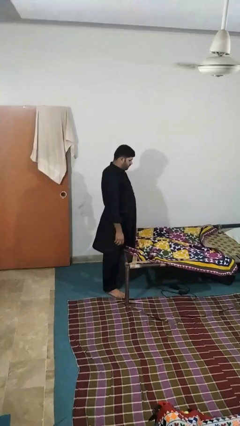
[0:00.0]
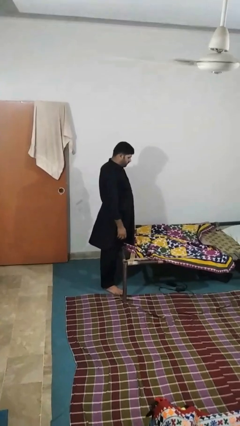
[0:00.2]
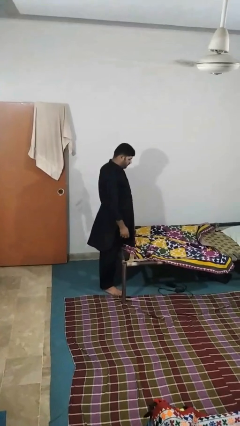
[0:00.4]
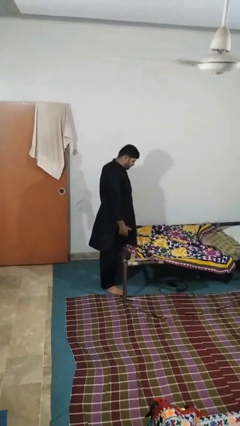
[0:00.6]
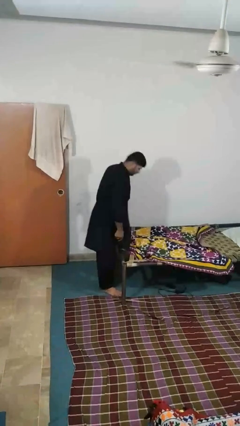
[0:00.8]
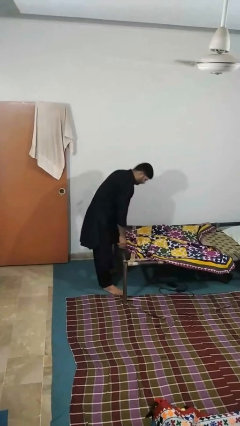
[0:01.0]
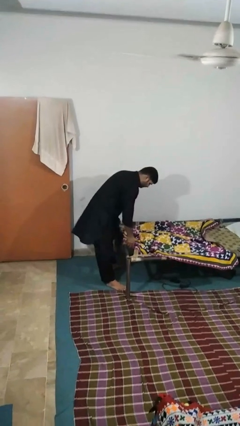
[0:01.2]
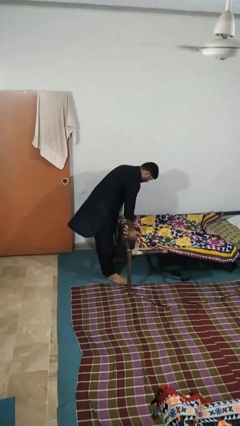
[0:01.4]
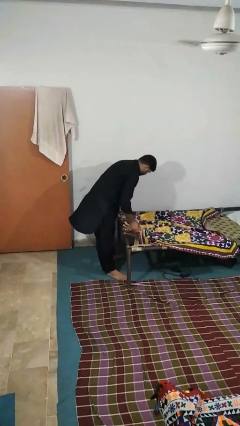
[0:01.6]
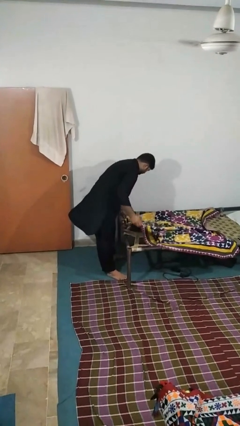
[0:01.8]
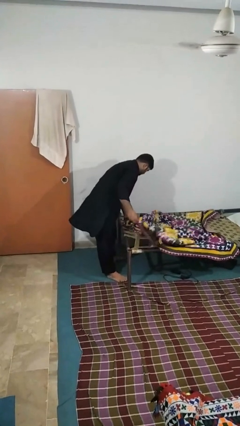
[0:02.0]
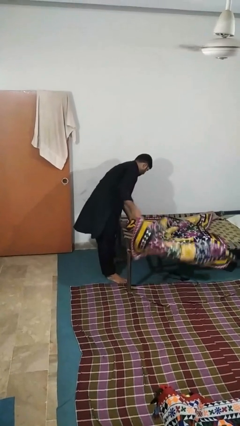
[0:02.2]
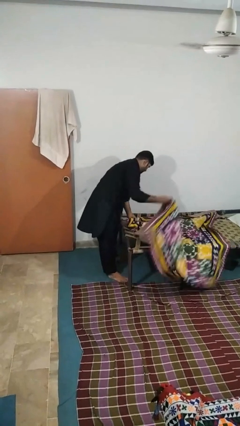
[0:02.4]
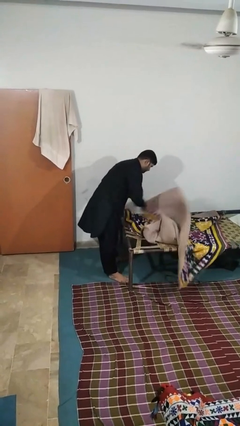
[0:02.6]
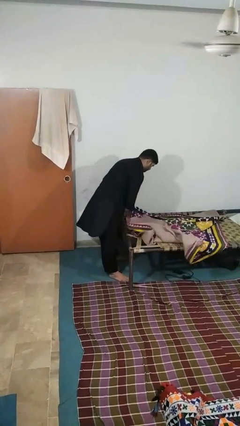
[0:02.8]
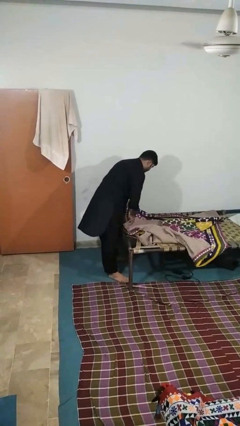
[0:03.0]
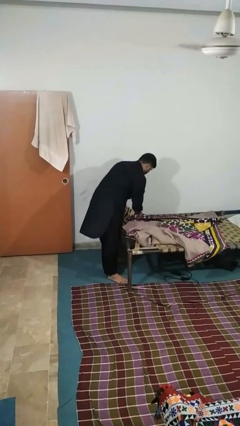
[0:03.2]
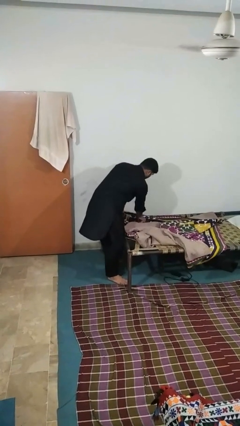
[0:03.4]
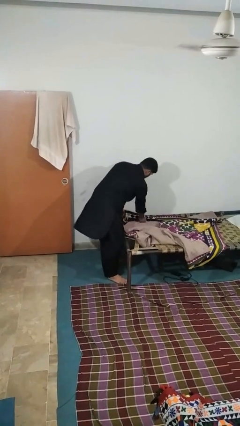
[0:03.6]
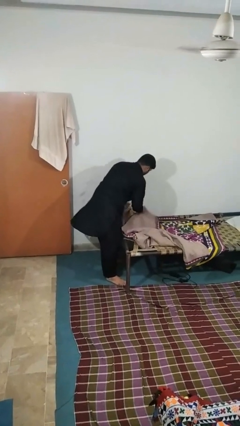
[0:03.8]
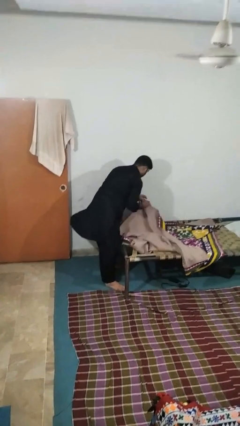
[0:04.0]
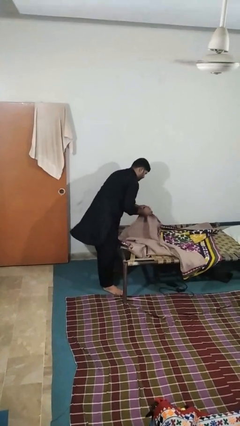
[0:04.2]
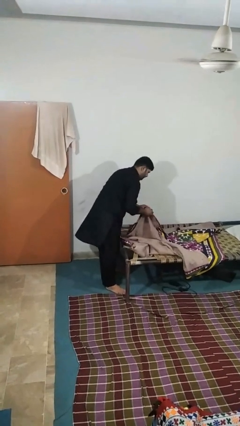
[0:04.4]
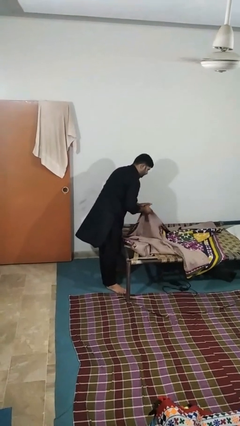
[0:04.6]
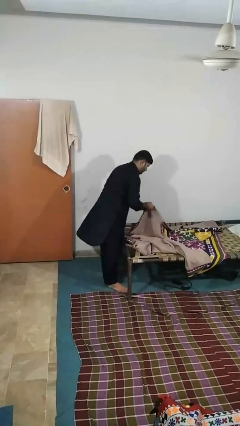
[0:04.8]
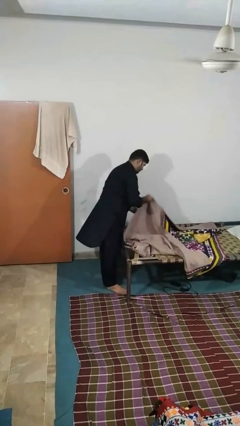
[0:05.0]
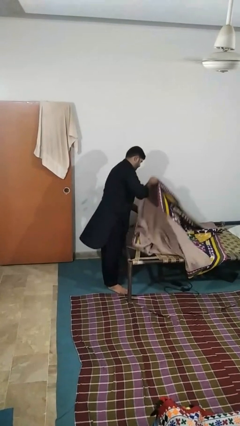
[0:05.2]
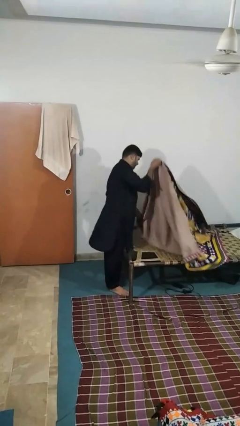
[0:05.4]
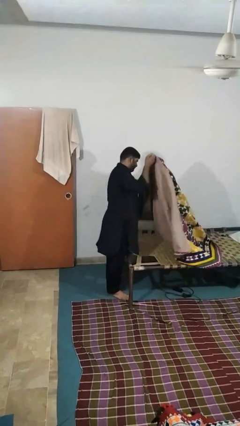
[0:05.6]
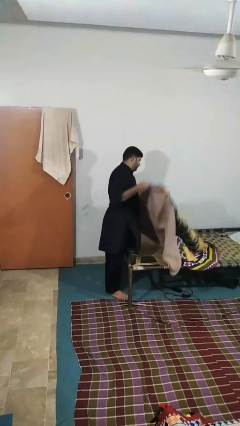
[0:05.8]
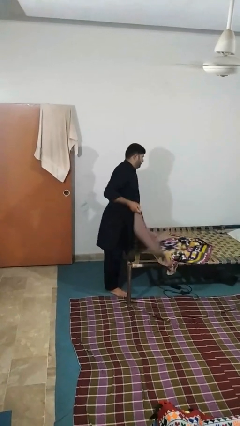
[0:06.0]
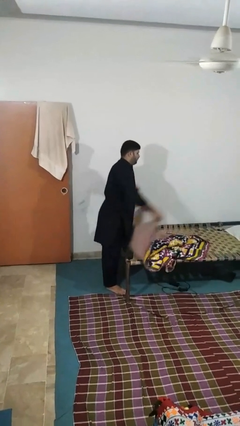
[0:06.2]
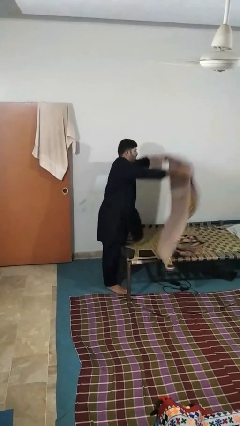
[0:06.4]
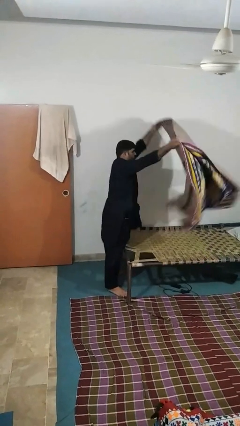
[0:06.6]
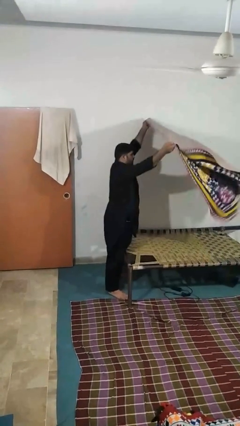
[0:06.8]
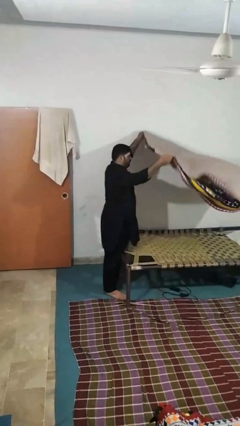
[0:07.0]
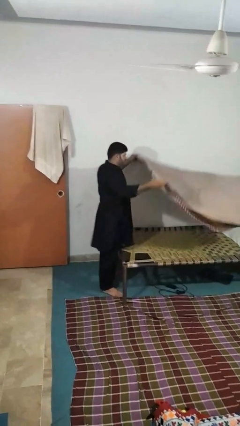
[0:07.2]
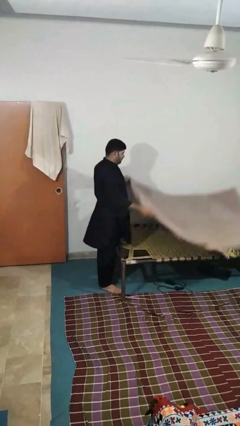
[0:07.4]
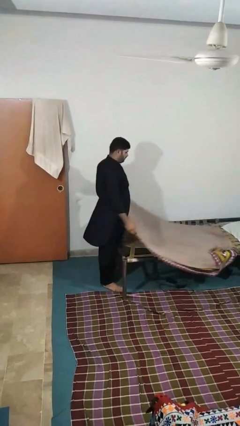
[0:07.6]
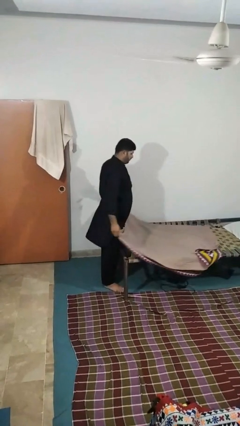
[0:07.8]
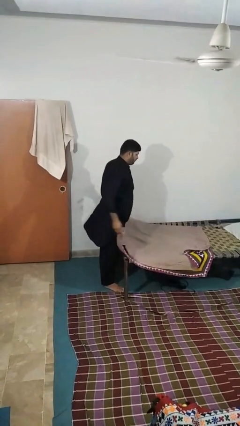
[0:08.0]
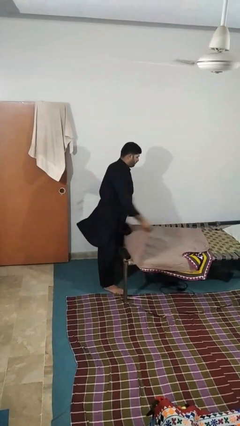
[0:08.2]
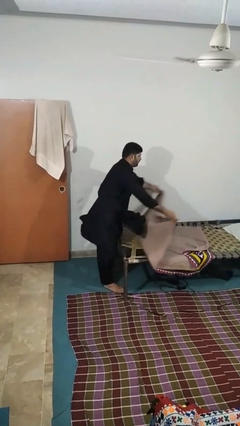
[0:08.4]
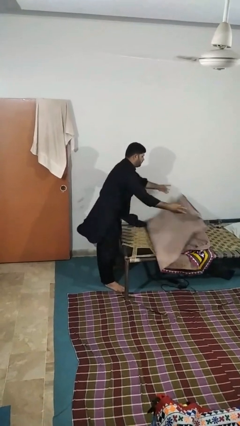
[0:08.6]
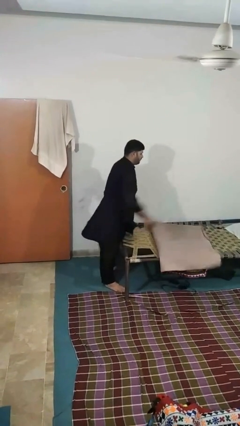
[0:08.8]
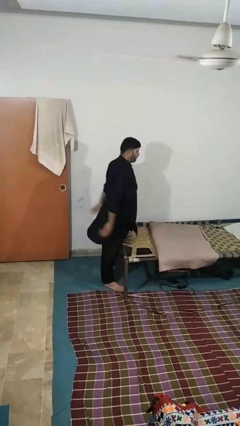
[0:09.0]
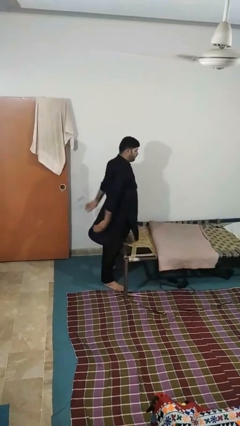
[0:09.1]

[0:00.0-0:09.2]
person folds blanket

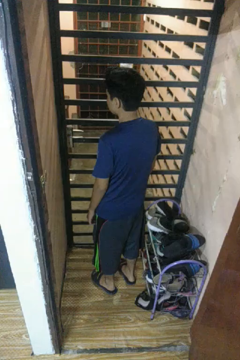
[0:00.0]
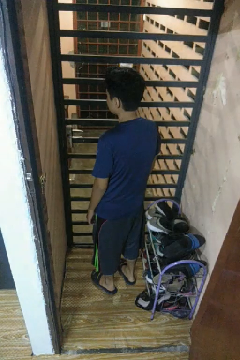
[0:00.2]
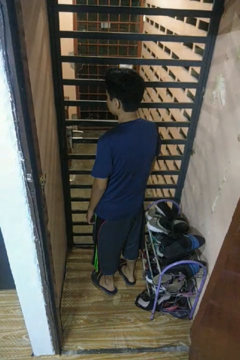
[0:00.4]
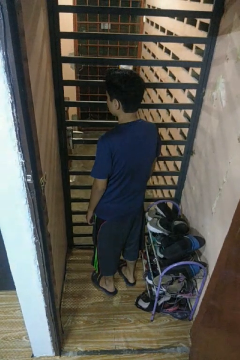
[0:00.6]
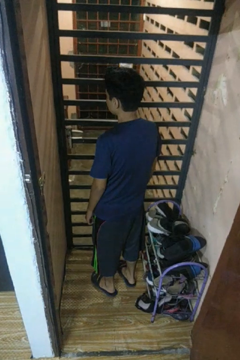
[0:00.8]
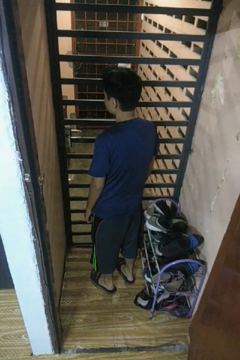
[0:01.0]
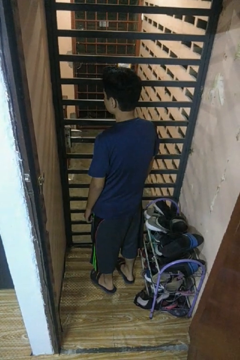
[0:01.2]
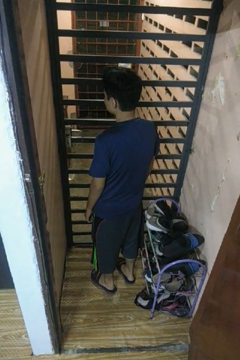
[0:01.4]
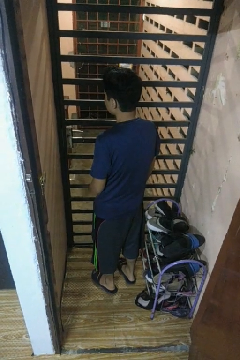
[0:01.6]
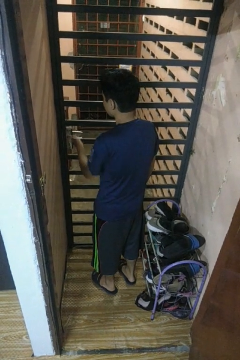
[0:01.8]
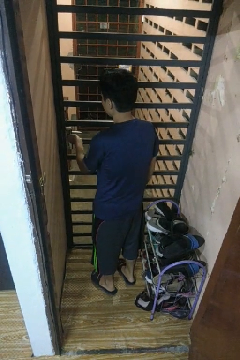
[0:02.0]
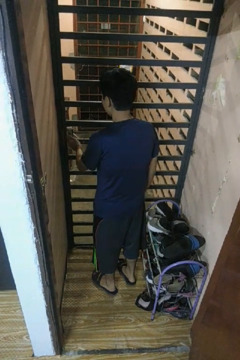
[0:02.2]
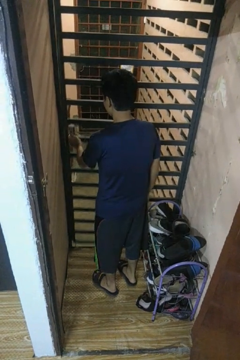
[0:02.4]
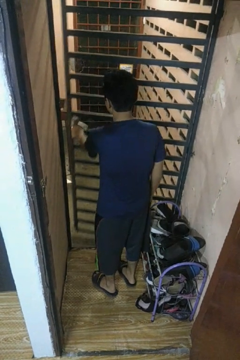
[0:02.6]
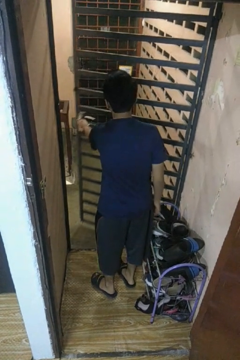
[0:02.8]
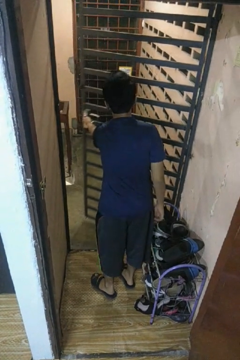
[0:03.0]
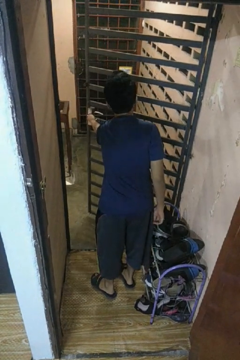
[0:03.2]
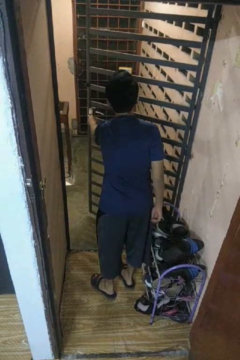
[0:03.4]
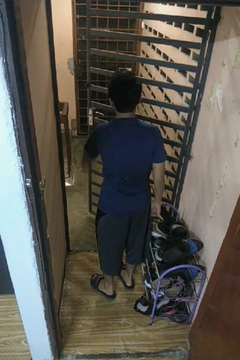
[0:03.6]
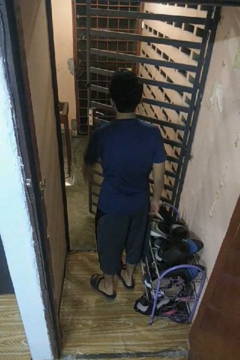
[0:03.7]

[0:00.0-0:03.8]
person opens gate

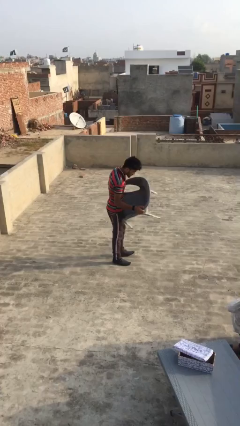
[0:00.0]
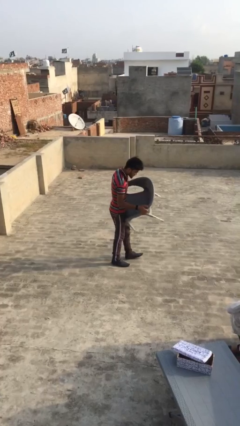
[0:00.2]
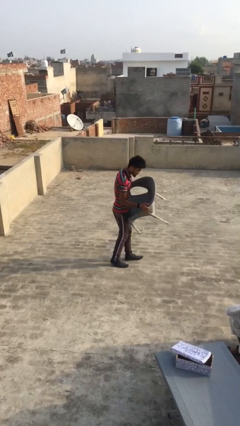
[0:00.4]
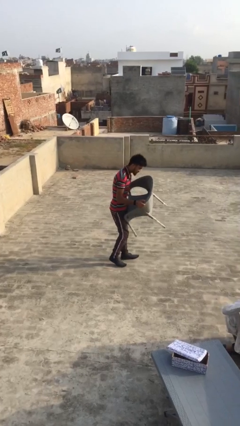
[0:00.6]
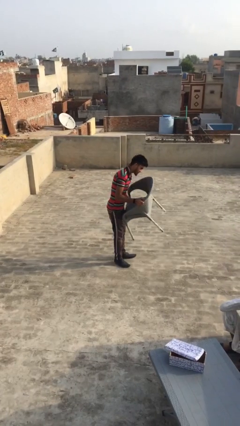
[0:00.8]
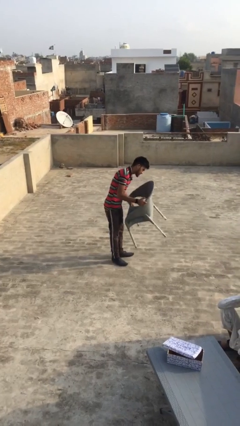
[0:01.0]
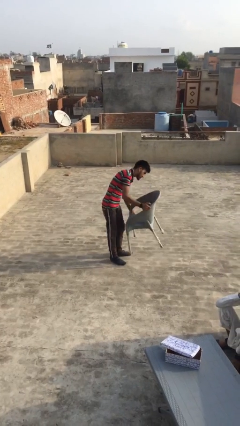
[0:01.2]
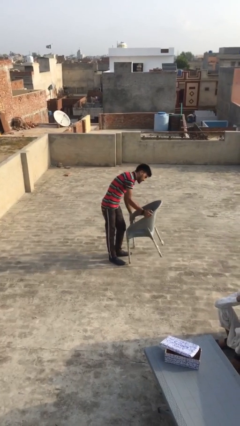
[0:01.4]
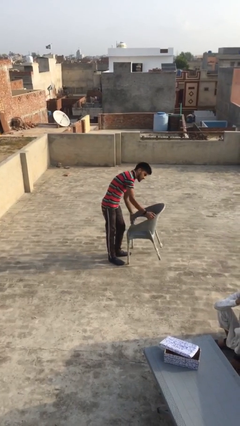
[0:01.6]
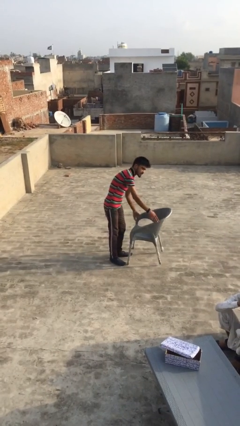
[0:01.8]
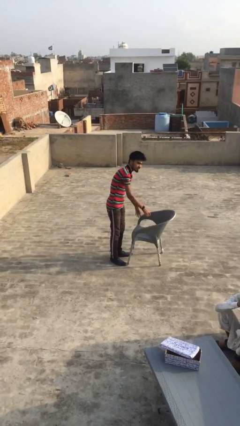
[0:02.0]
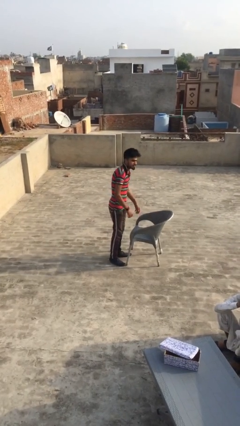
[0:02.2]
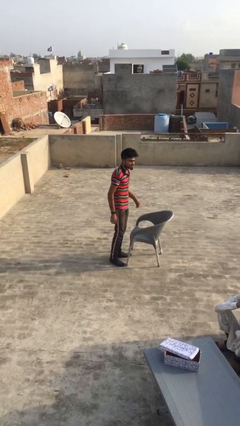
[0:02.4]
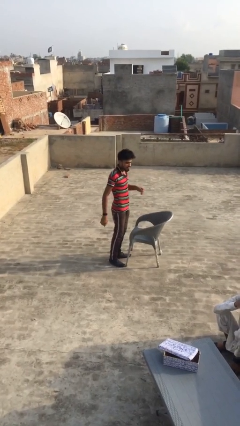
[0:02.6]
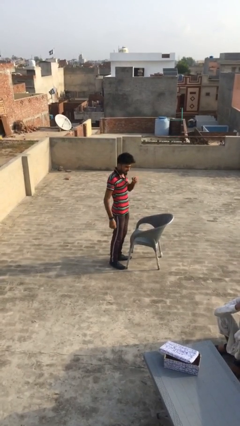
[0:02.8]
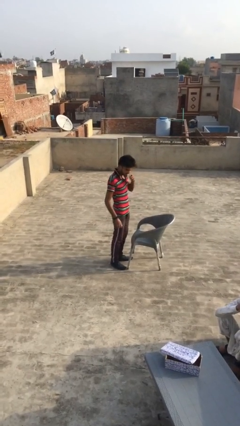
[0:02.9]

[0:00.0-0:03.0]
person puts down object on floor

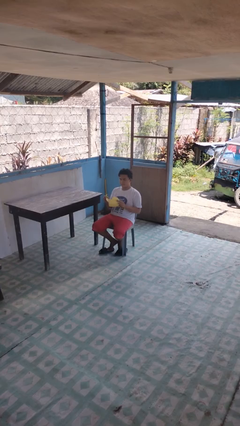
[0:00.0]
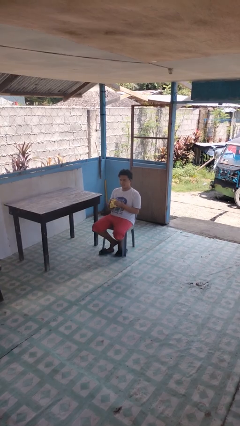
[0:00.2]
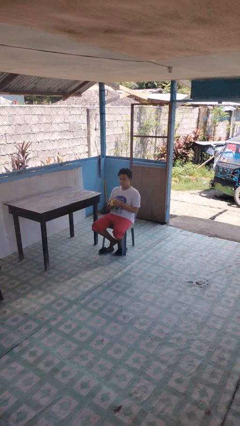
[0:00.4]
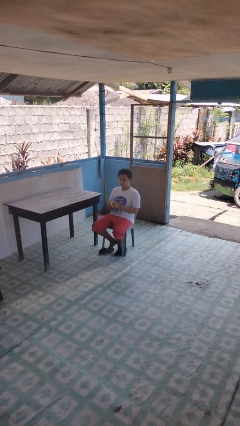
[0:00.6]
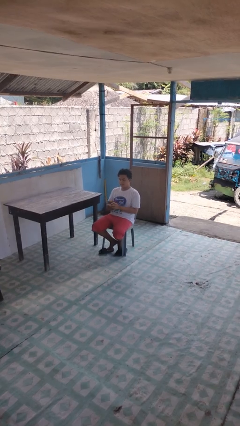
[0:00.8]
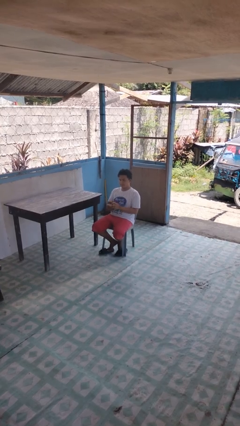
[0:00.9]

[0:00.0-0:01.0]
person crumples paper

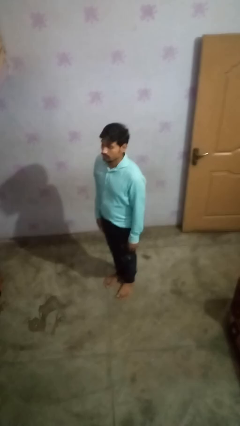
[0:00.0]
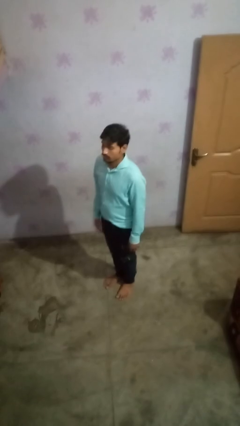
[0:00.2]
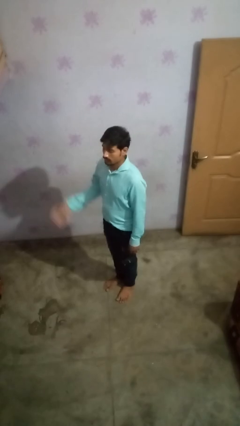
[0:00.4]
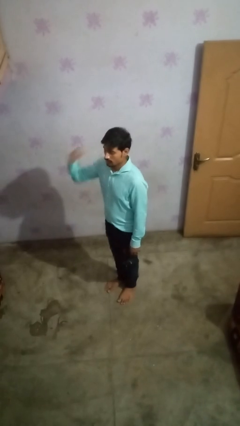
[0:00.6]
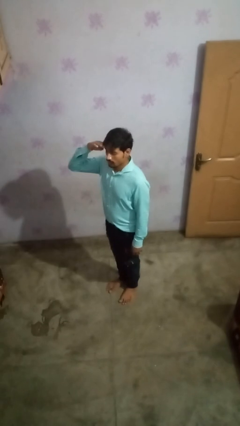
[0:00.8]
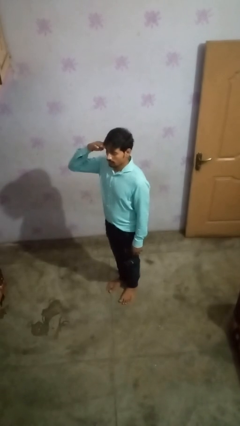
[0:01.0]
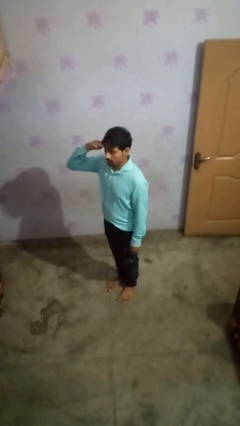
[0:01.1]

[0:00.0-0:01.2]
person salutes
